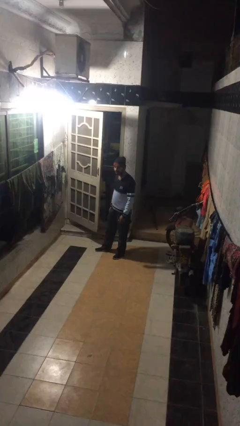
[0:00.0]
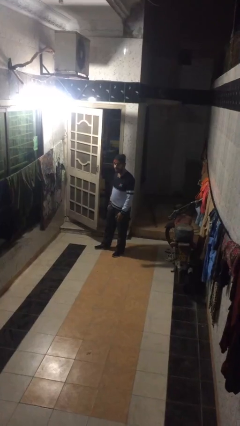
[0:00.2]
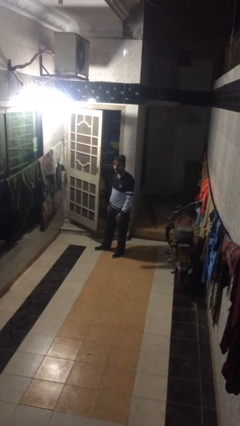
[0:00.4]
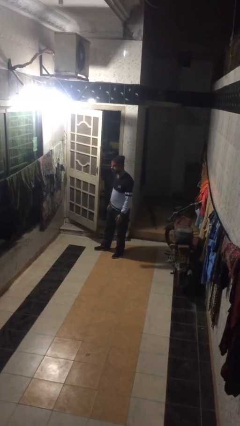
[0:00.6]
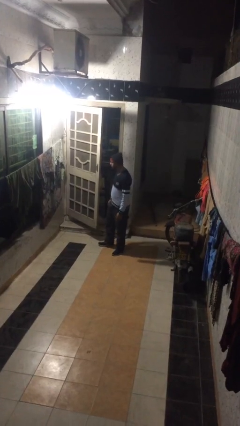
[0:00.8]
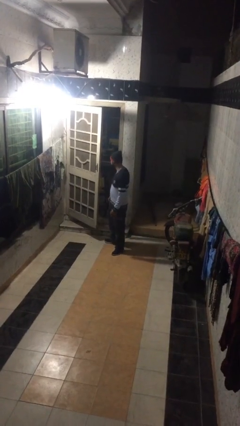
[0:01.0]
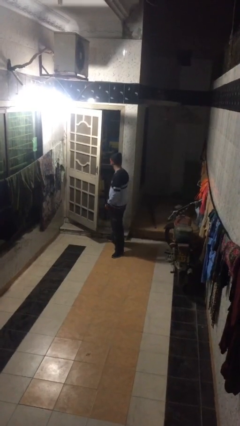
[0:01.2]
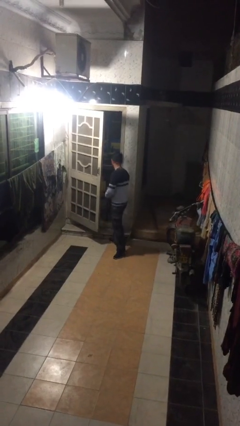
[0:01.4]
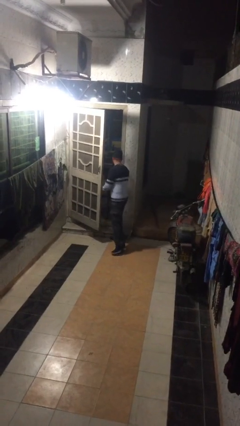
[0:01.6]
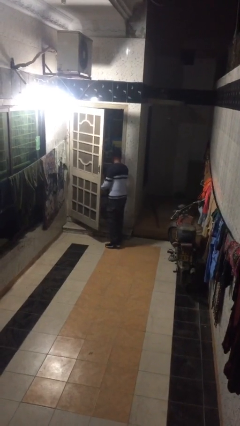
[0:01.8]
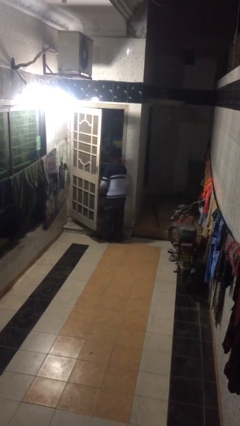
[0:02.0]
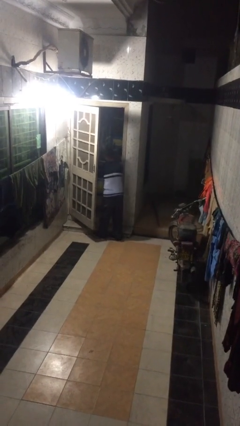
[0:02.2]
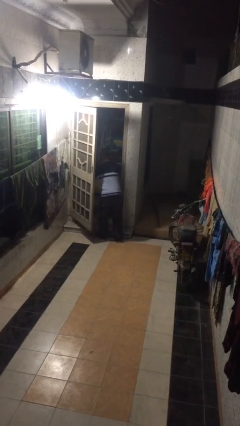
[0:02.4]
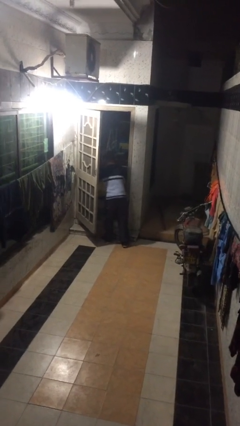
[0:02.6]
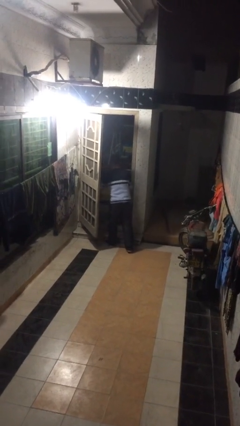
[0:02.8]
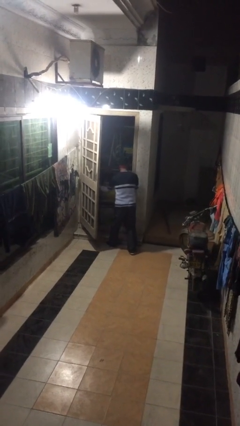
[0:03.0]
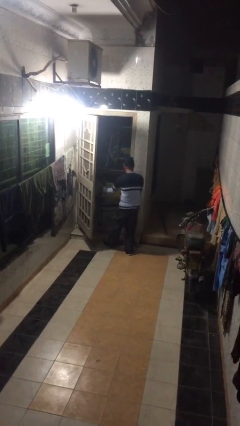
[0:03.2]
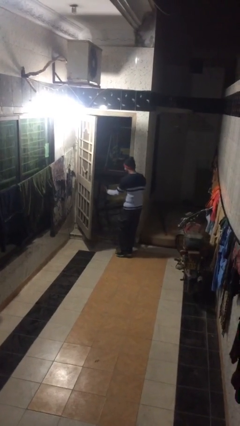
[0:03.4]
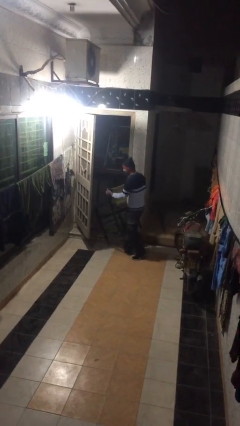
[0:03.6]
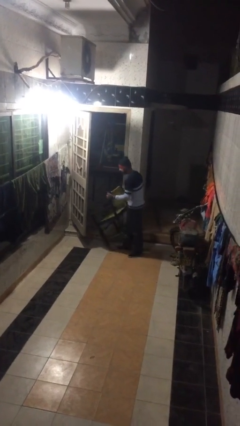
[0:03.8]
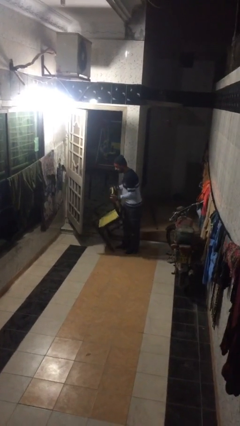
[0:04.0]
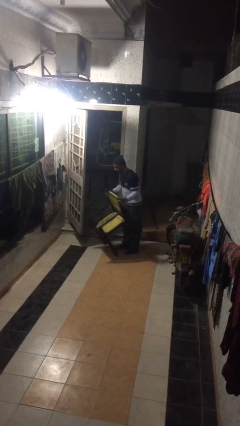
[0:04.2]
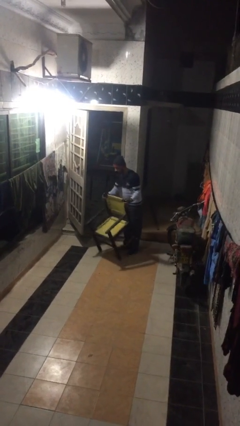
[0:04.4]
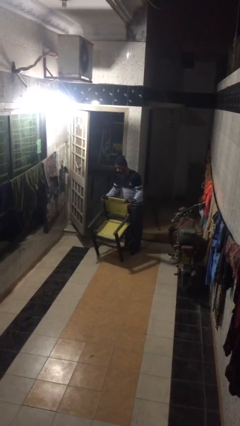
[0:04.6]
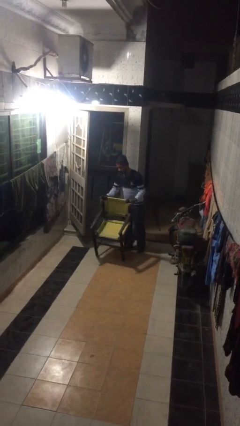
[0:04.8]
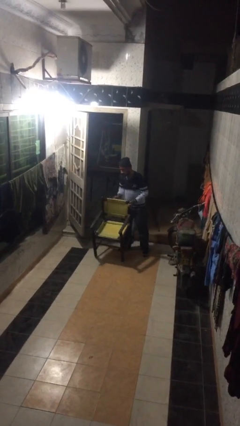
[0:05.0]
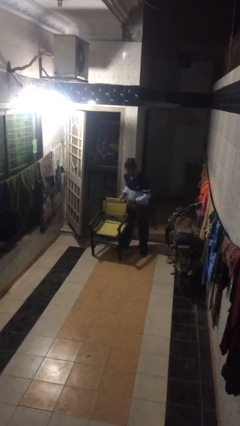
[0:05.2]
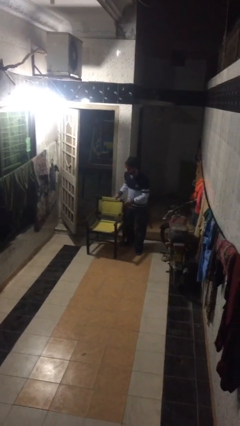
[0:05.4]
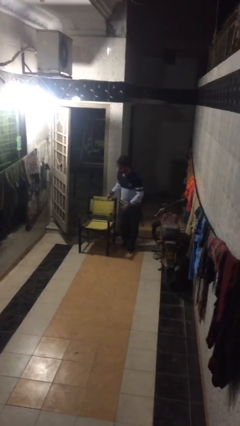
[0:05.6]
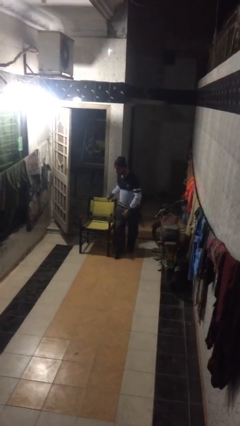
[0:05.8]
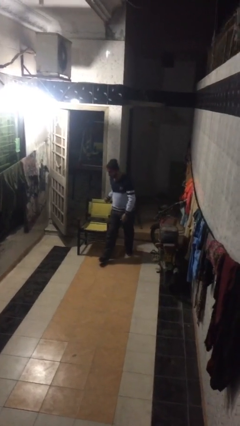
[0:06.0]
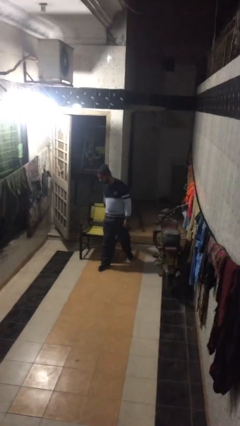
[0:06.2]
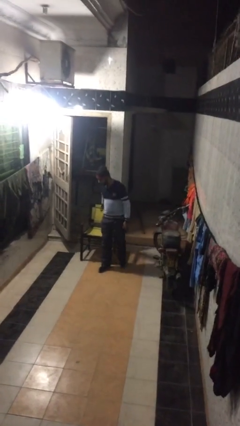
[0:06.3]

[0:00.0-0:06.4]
person stands up

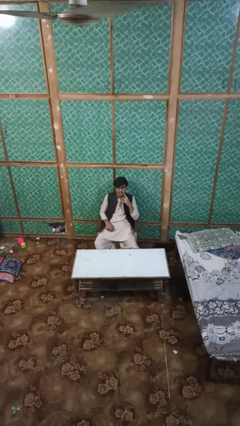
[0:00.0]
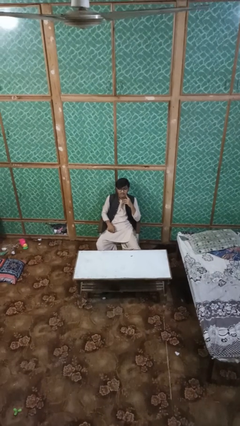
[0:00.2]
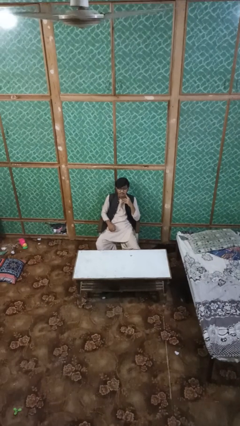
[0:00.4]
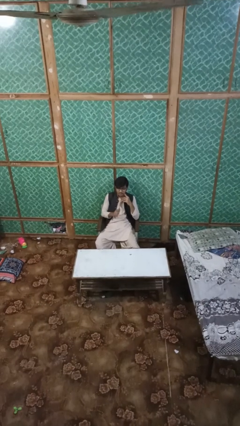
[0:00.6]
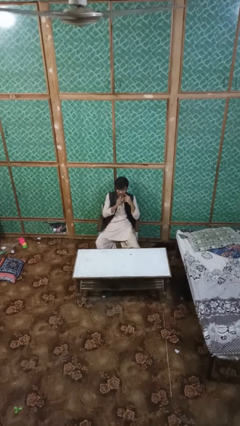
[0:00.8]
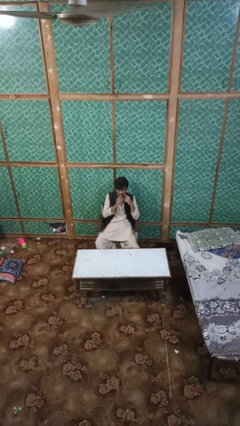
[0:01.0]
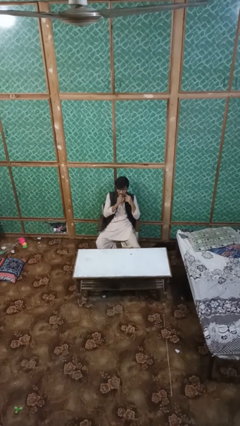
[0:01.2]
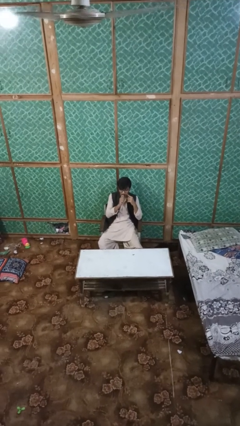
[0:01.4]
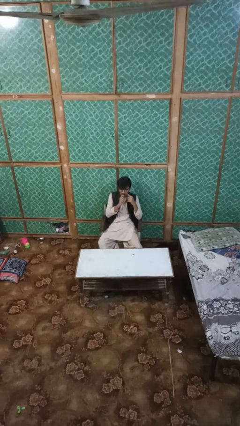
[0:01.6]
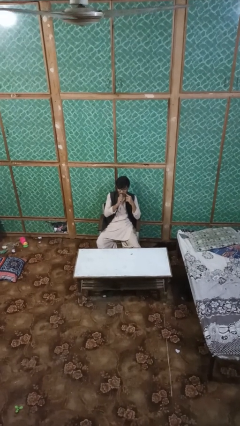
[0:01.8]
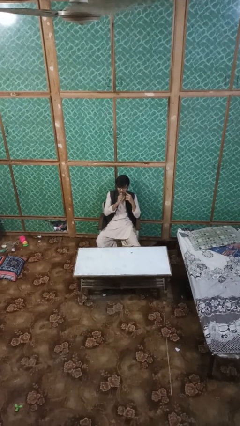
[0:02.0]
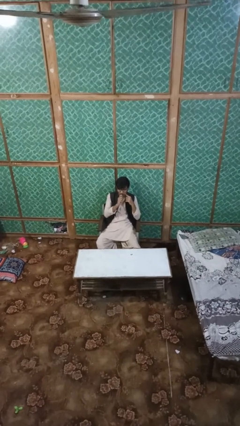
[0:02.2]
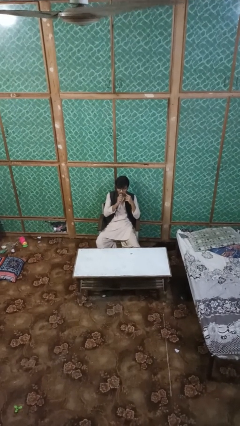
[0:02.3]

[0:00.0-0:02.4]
person vapes

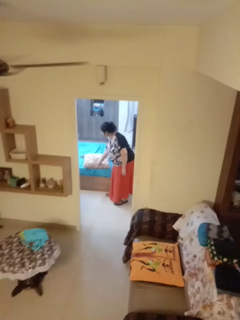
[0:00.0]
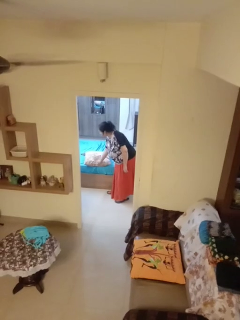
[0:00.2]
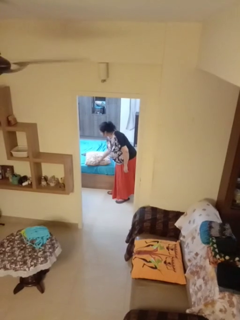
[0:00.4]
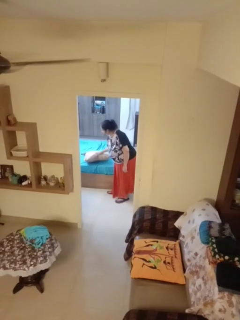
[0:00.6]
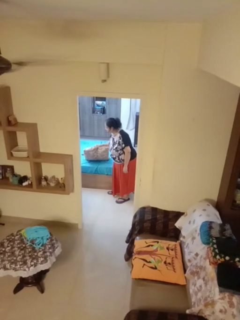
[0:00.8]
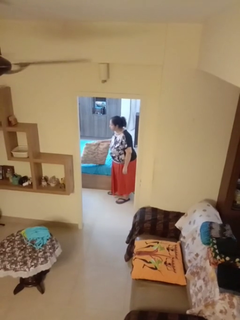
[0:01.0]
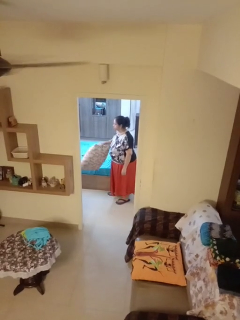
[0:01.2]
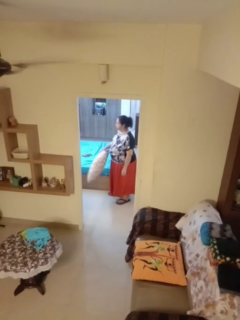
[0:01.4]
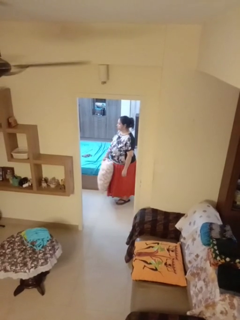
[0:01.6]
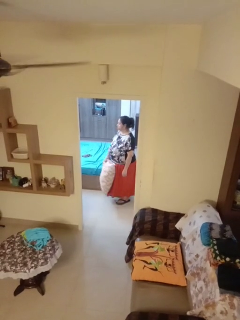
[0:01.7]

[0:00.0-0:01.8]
person picks up object from bed

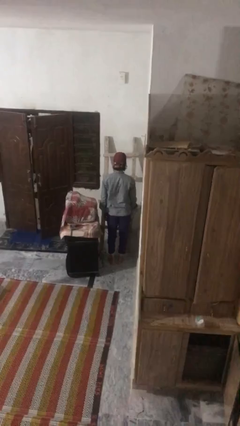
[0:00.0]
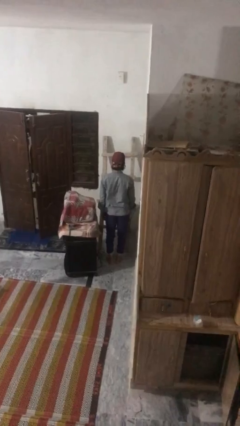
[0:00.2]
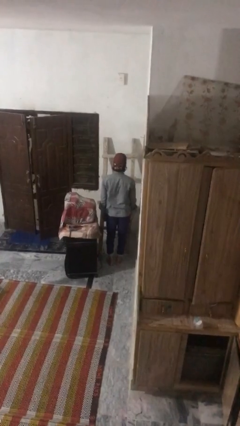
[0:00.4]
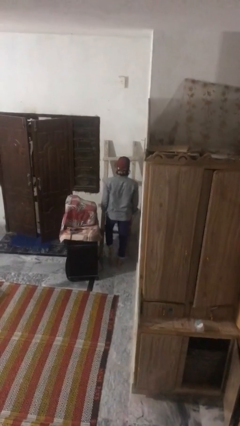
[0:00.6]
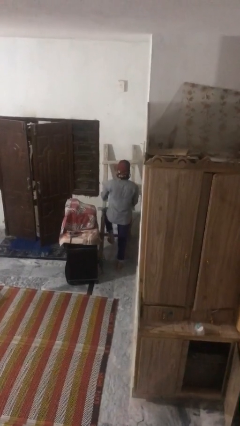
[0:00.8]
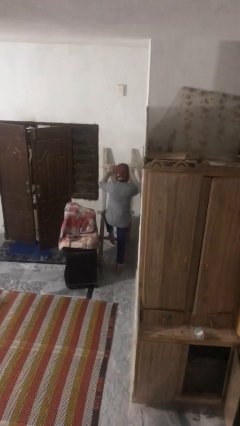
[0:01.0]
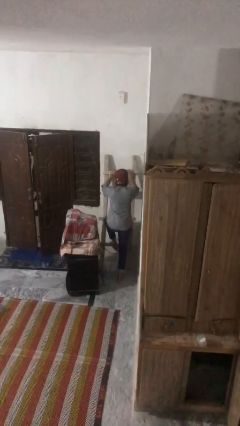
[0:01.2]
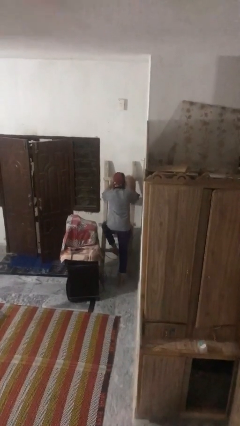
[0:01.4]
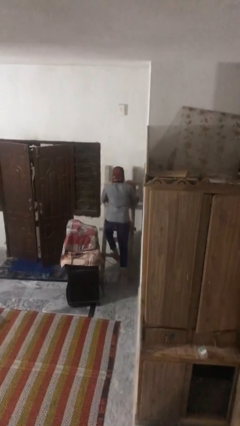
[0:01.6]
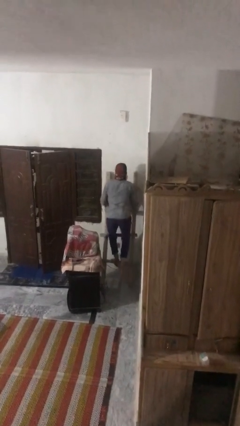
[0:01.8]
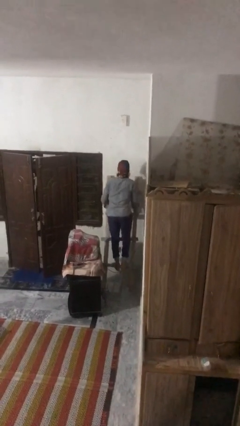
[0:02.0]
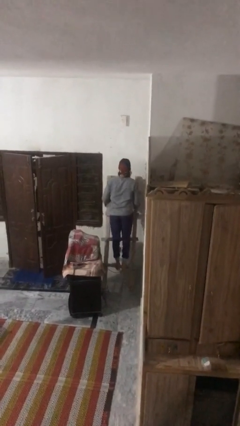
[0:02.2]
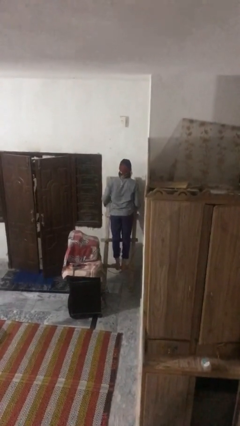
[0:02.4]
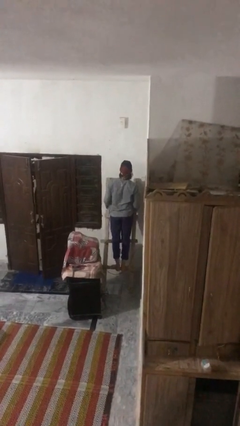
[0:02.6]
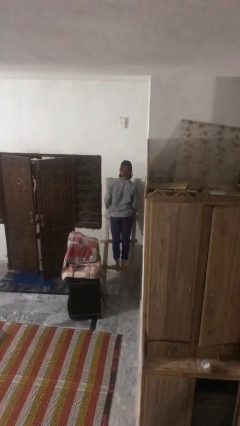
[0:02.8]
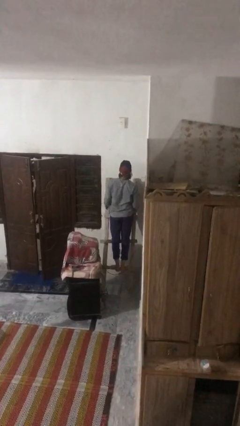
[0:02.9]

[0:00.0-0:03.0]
person climbs up ladder

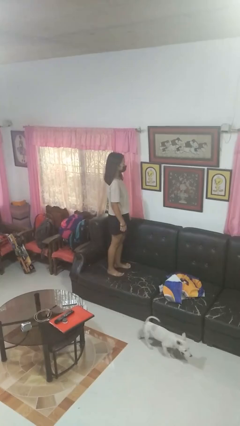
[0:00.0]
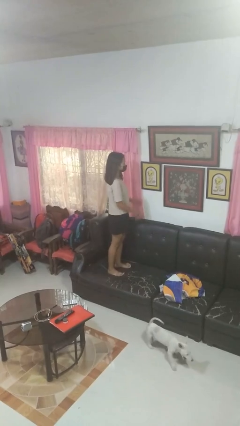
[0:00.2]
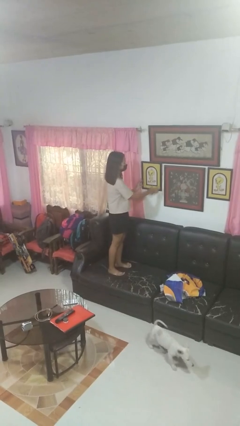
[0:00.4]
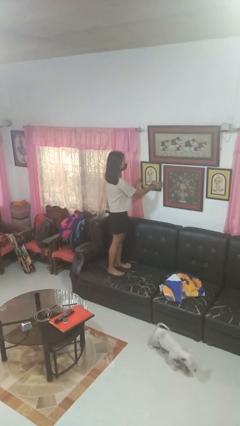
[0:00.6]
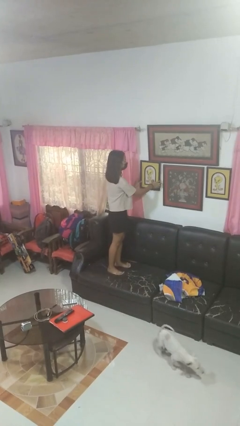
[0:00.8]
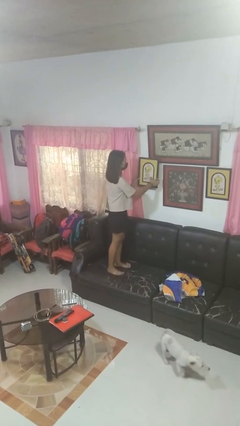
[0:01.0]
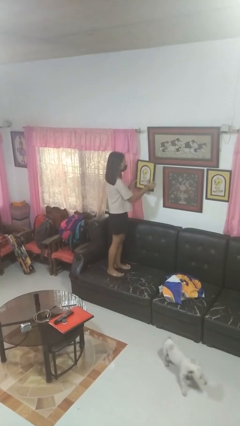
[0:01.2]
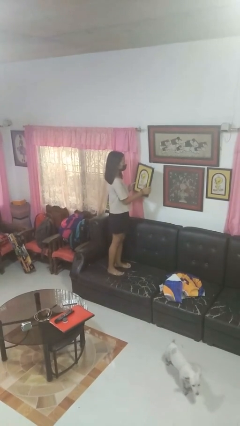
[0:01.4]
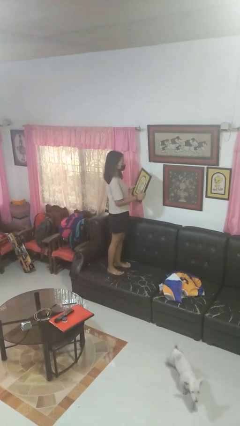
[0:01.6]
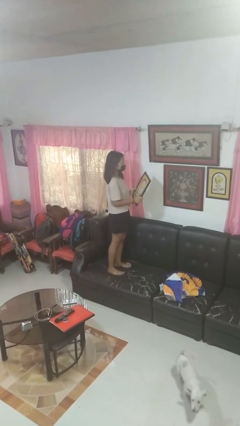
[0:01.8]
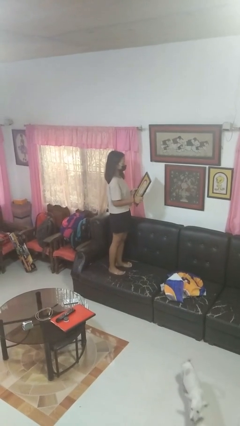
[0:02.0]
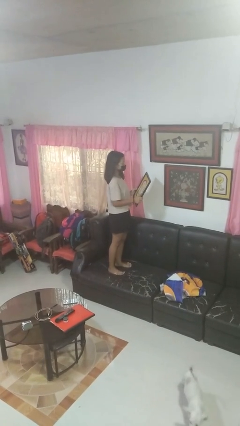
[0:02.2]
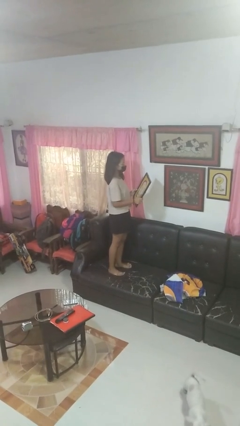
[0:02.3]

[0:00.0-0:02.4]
person takes down picture frame

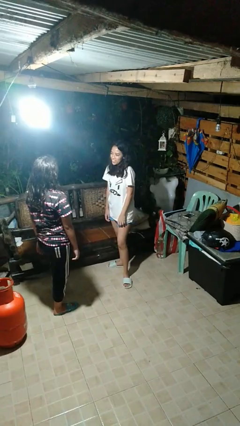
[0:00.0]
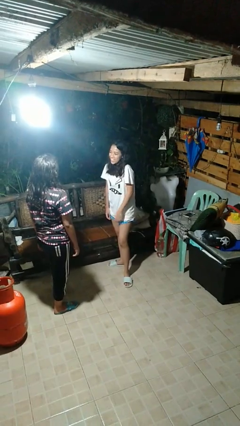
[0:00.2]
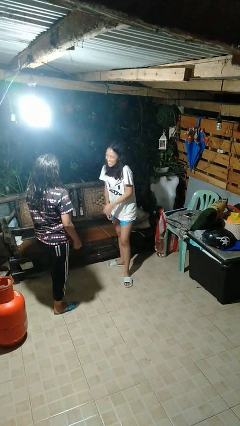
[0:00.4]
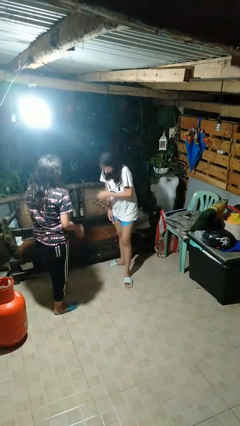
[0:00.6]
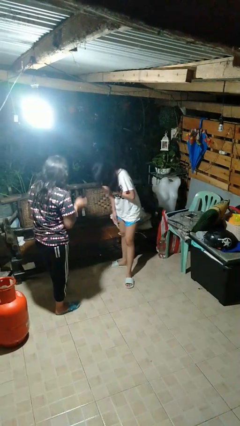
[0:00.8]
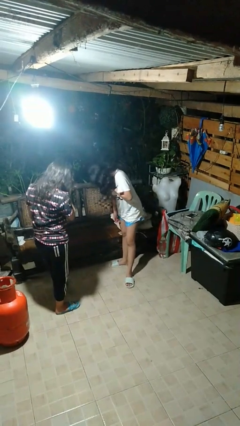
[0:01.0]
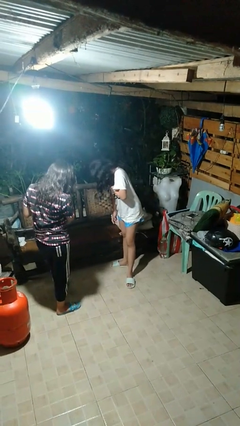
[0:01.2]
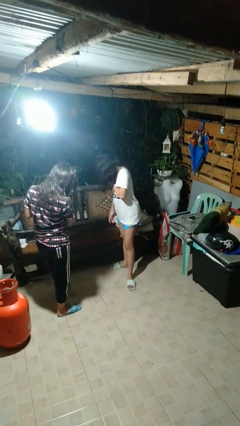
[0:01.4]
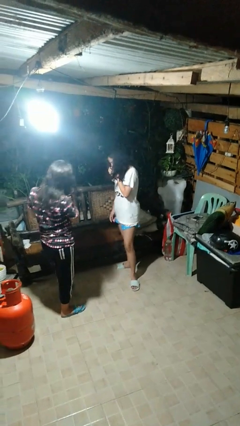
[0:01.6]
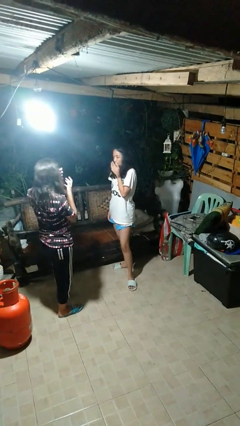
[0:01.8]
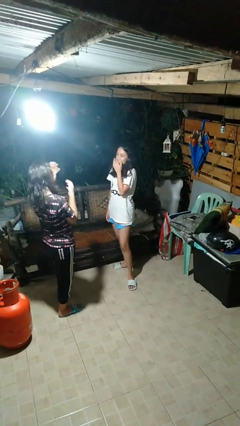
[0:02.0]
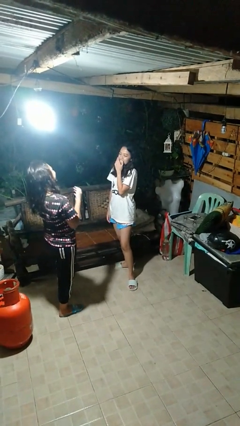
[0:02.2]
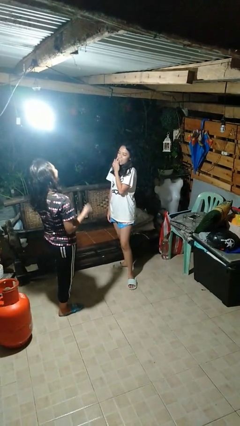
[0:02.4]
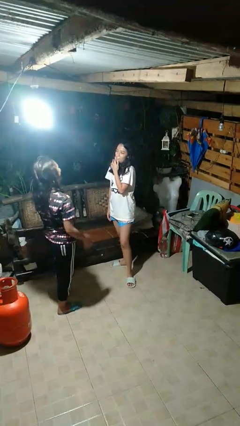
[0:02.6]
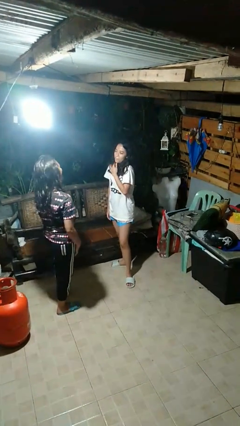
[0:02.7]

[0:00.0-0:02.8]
person laughs with person
